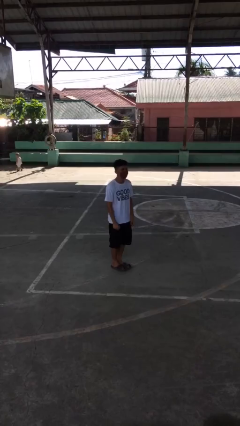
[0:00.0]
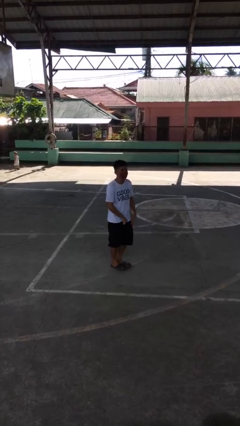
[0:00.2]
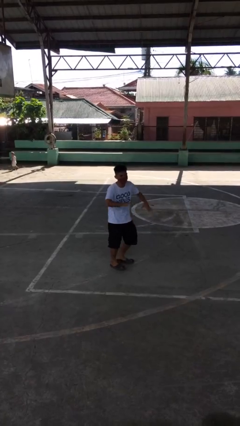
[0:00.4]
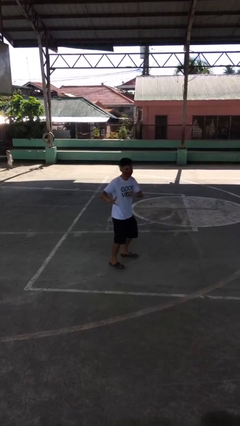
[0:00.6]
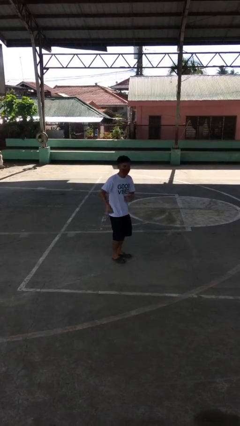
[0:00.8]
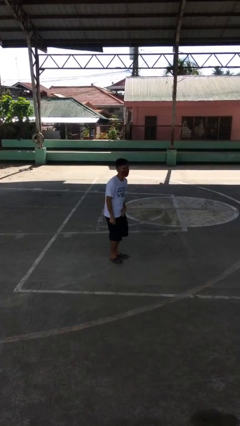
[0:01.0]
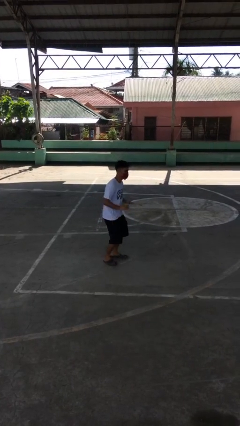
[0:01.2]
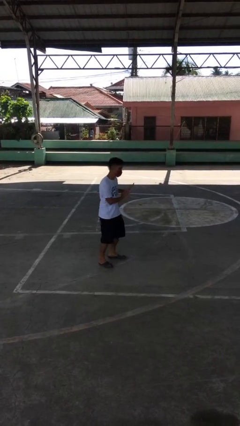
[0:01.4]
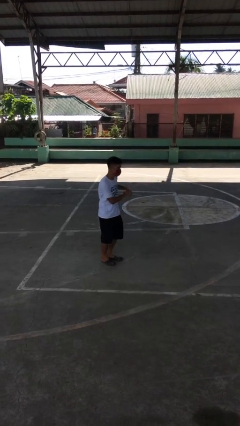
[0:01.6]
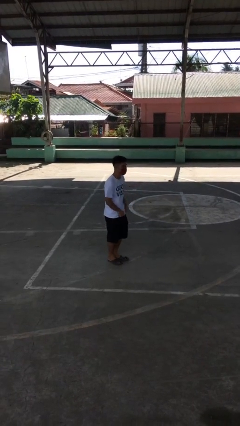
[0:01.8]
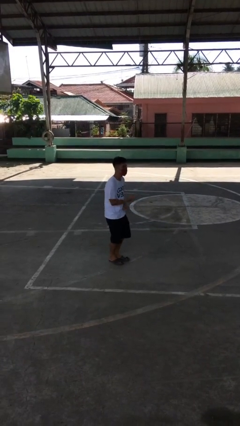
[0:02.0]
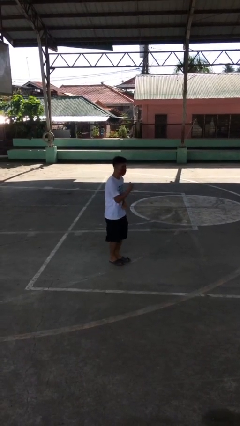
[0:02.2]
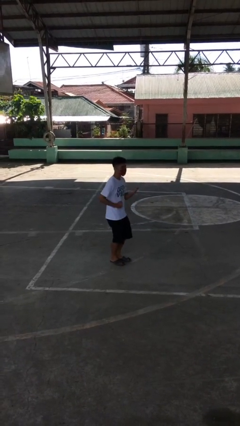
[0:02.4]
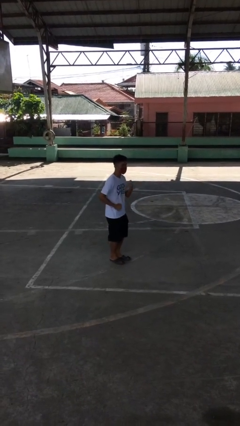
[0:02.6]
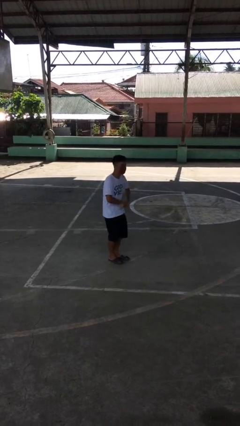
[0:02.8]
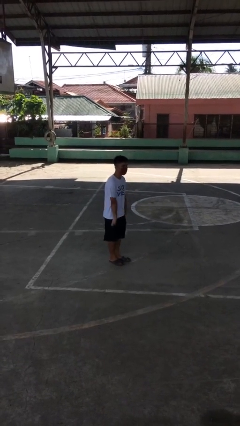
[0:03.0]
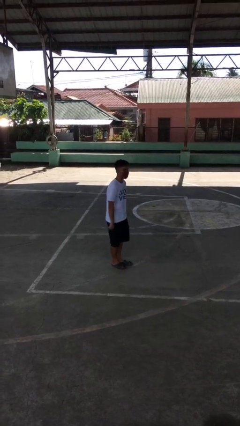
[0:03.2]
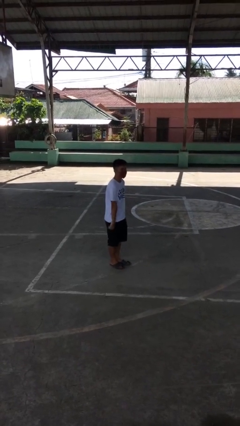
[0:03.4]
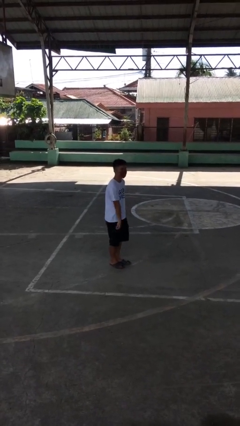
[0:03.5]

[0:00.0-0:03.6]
person dances in place

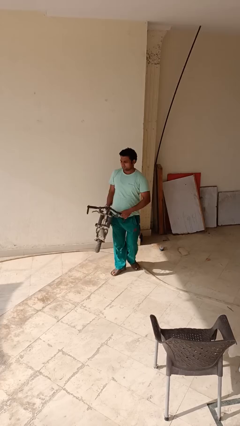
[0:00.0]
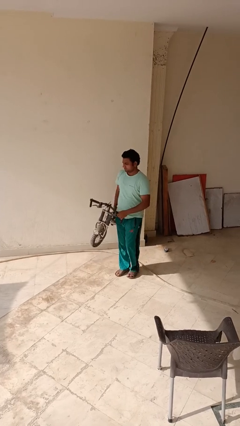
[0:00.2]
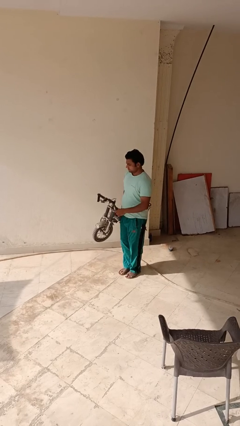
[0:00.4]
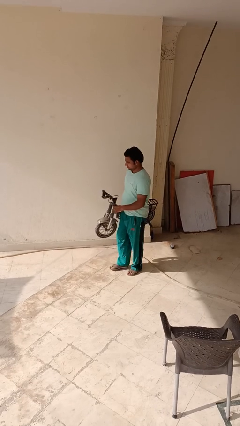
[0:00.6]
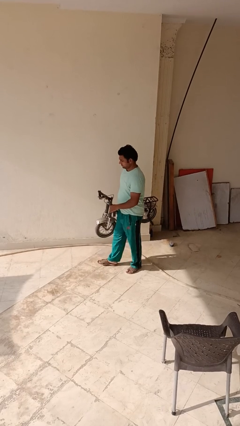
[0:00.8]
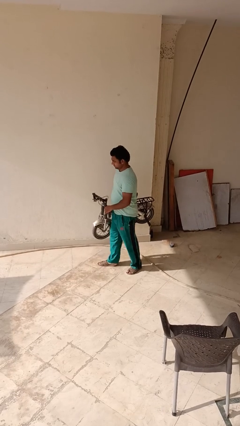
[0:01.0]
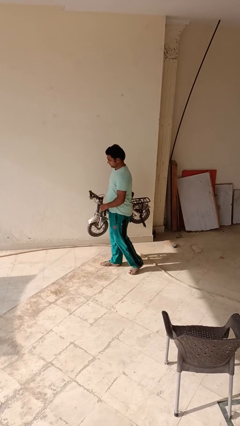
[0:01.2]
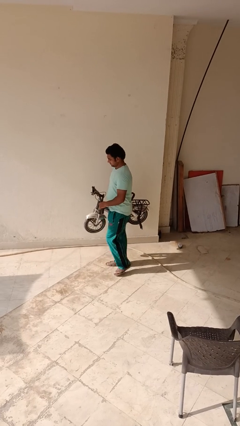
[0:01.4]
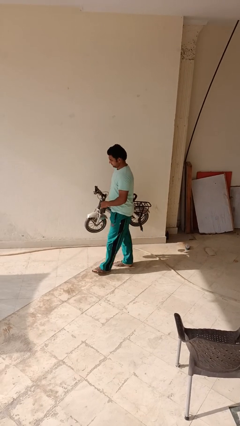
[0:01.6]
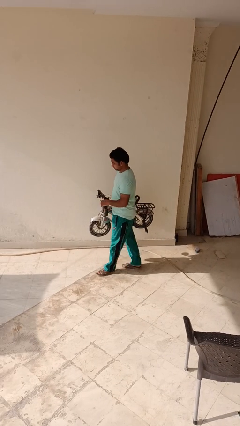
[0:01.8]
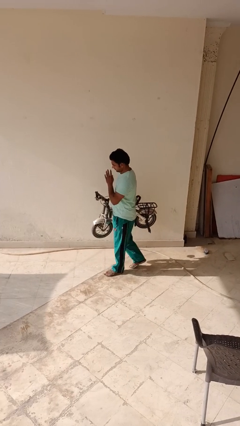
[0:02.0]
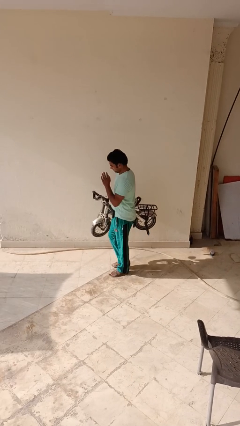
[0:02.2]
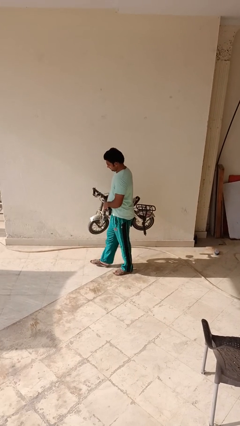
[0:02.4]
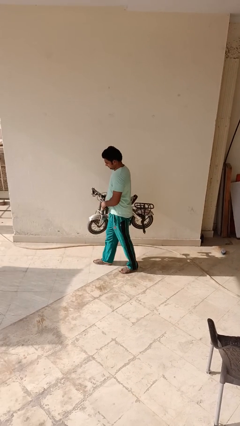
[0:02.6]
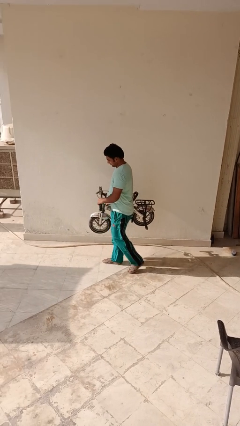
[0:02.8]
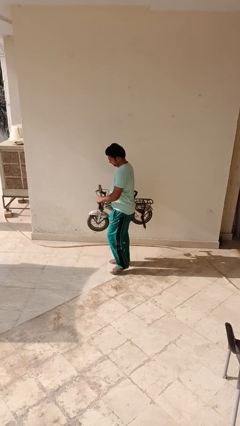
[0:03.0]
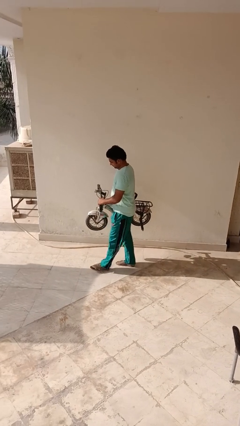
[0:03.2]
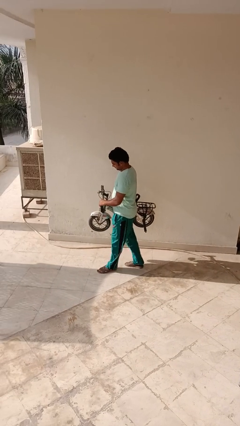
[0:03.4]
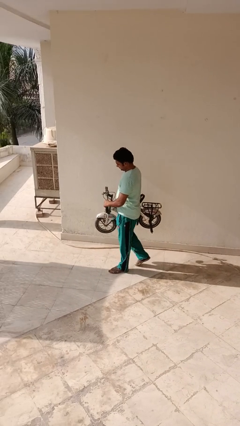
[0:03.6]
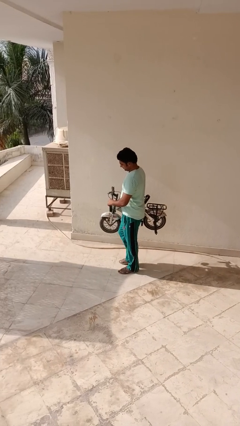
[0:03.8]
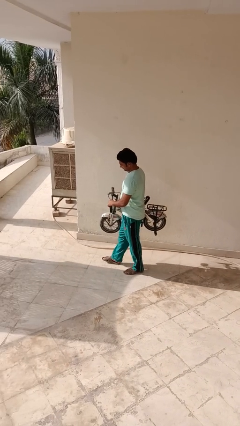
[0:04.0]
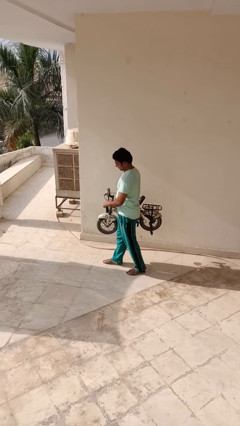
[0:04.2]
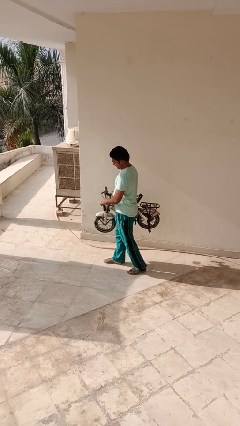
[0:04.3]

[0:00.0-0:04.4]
person carries bicycle

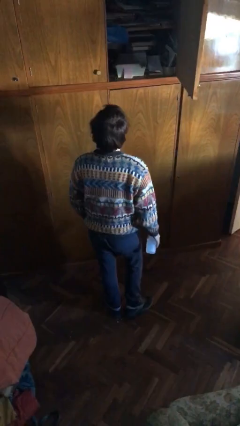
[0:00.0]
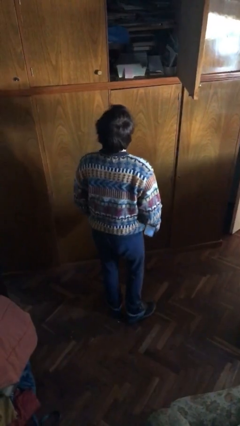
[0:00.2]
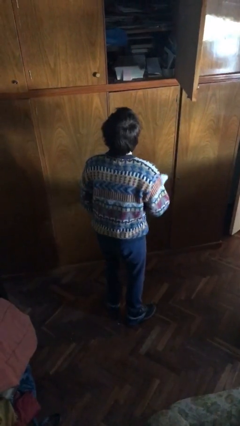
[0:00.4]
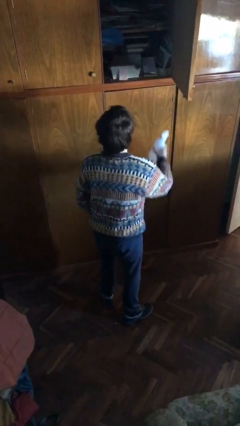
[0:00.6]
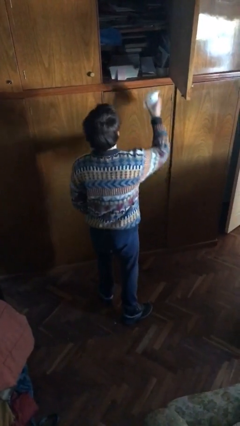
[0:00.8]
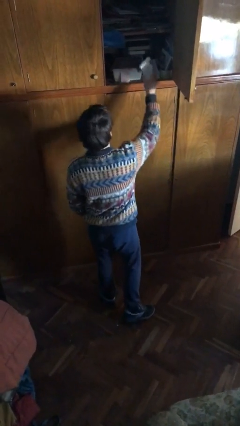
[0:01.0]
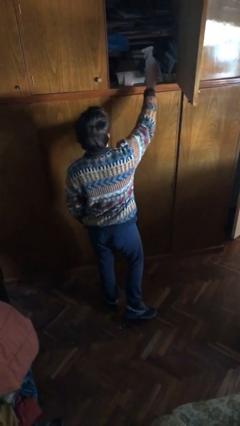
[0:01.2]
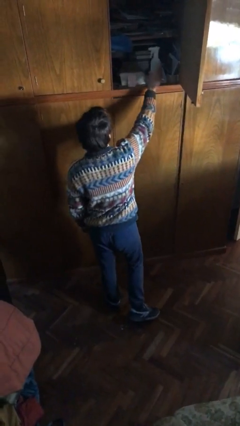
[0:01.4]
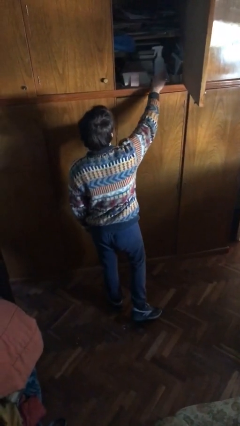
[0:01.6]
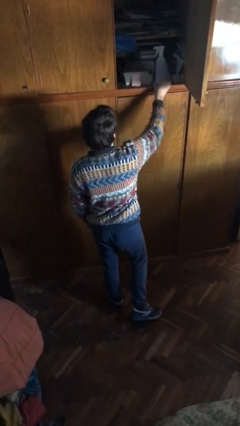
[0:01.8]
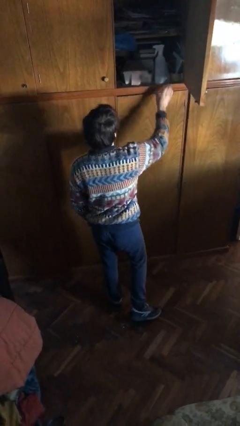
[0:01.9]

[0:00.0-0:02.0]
person puts down object into cabinet

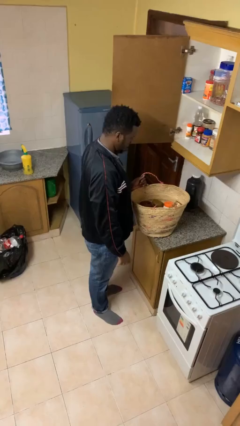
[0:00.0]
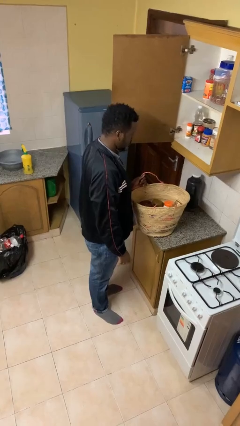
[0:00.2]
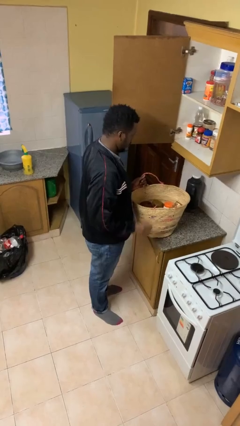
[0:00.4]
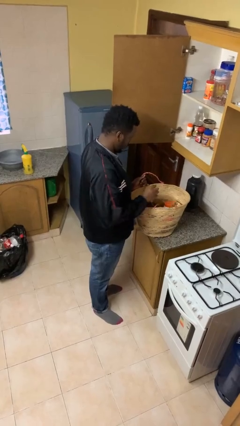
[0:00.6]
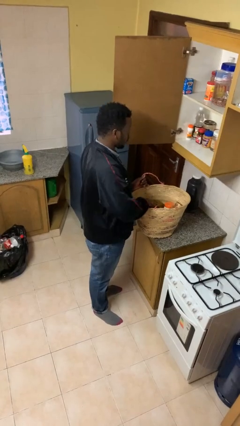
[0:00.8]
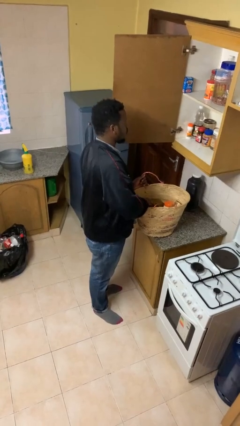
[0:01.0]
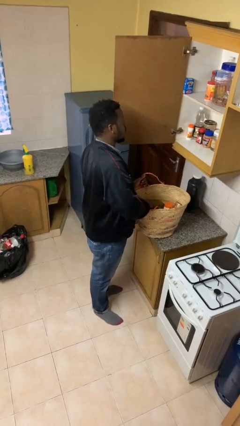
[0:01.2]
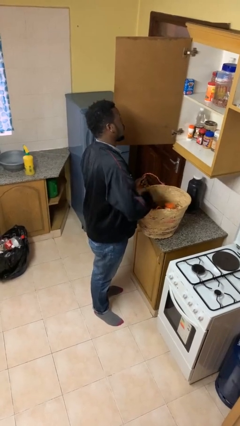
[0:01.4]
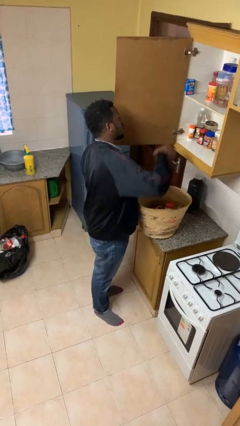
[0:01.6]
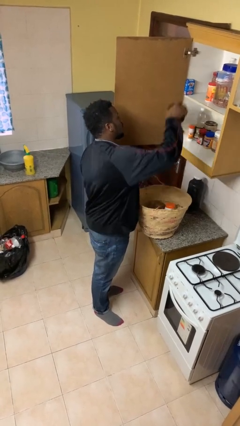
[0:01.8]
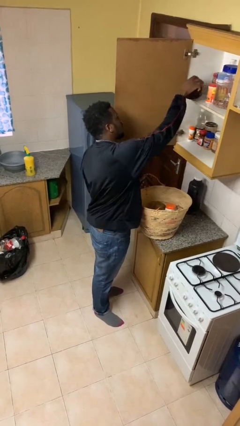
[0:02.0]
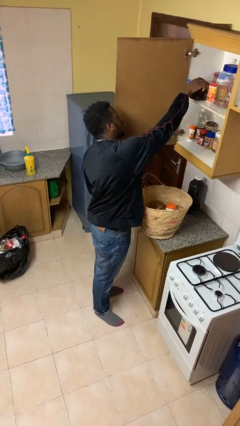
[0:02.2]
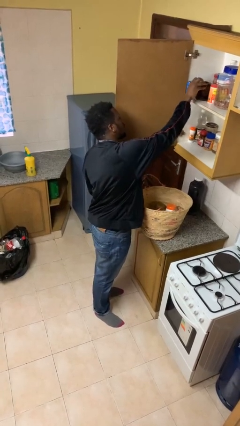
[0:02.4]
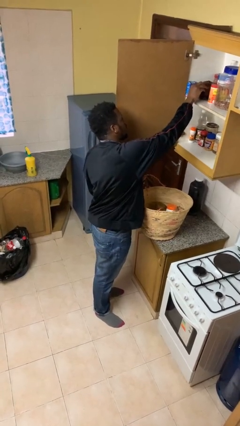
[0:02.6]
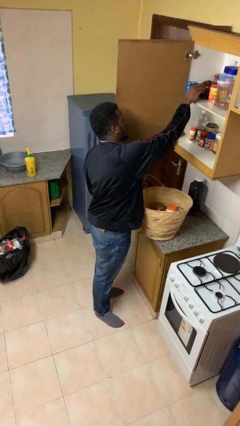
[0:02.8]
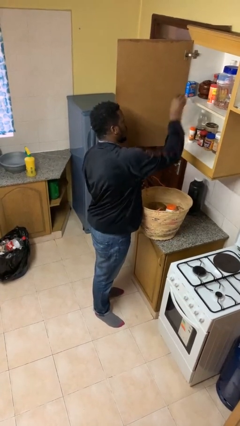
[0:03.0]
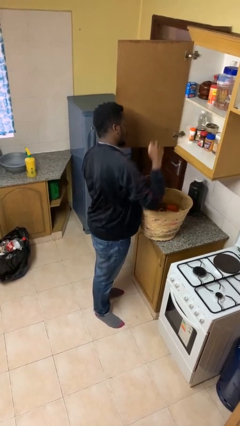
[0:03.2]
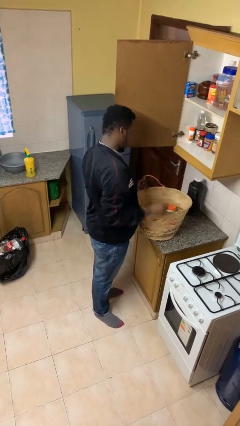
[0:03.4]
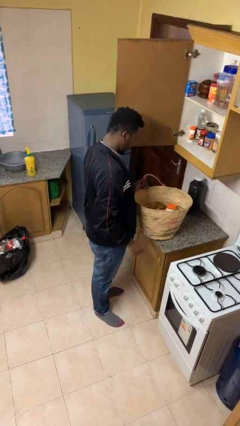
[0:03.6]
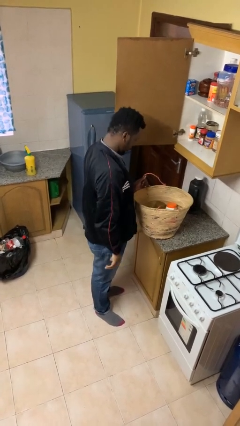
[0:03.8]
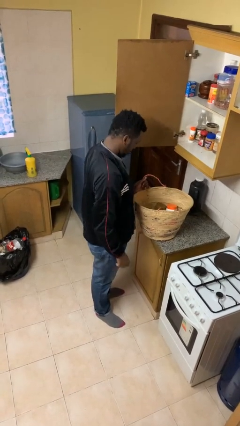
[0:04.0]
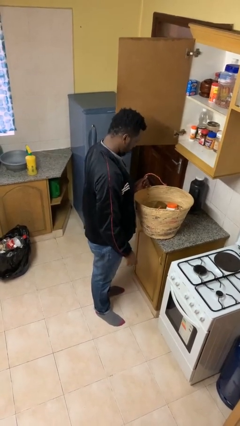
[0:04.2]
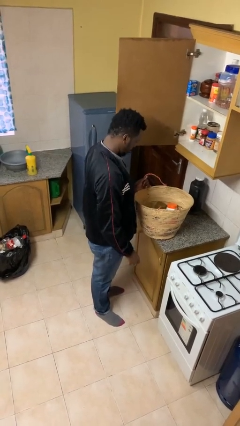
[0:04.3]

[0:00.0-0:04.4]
person loads groceries into cabinet

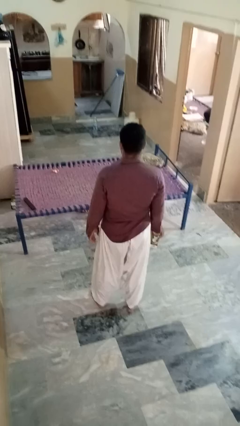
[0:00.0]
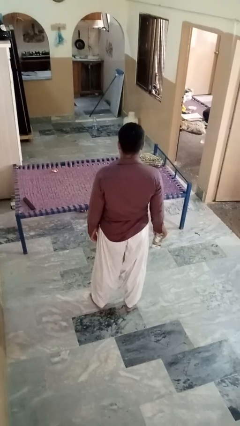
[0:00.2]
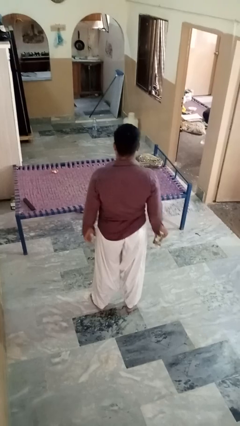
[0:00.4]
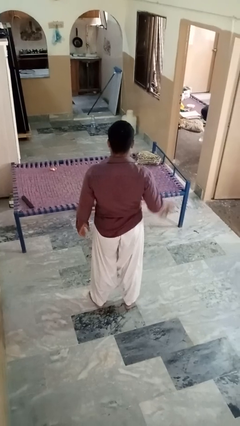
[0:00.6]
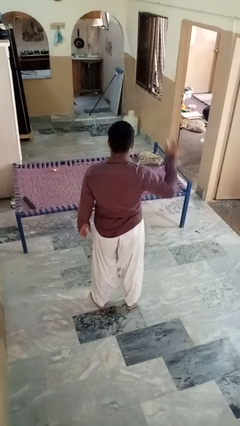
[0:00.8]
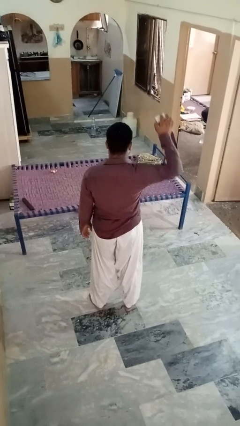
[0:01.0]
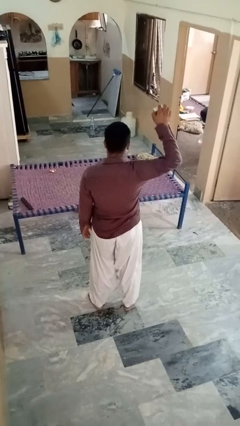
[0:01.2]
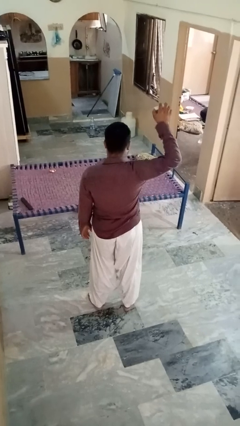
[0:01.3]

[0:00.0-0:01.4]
person drops object

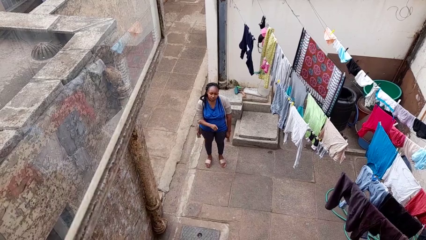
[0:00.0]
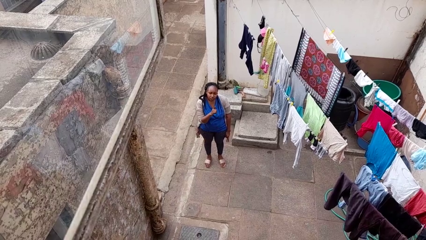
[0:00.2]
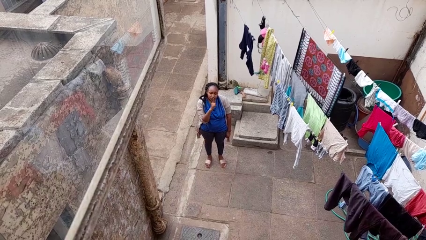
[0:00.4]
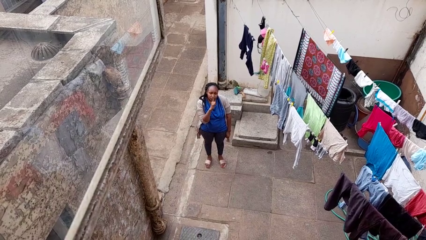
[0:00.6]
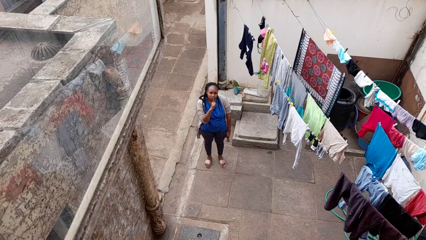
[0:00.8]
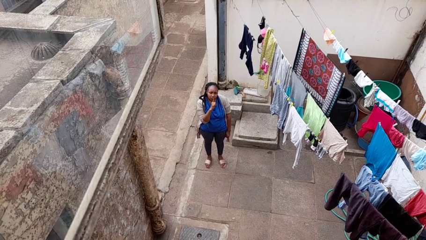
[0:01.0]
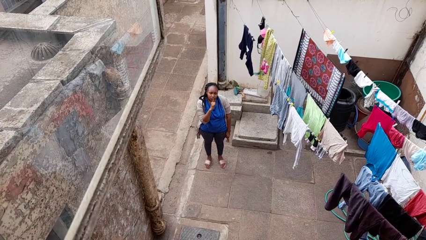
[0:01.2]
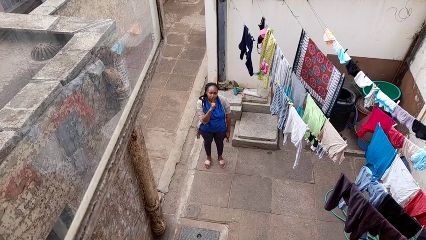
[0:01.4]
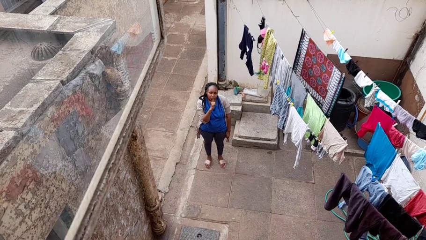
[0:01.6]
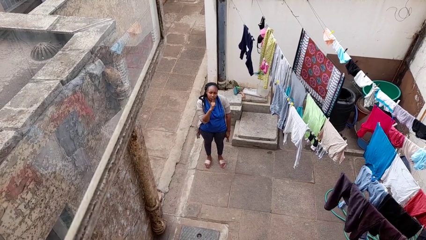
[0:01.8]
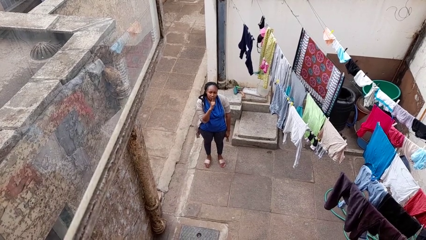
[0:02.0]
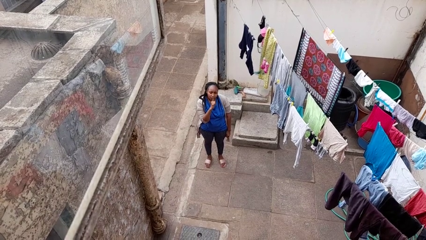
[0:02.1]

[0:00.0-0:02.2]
person gestures be quiet
